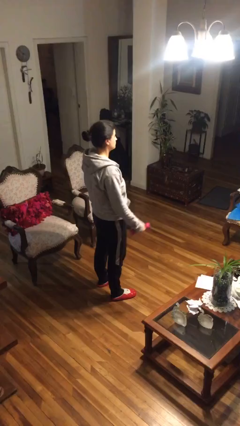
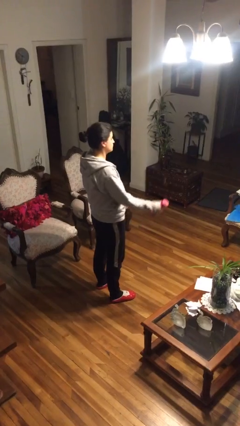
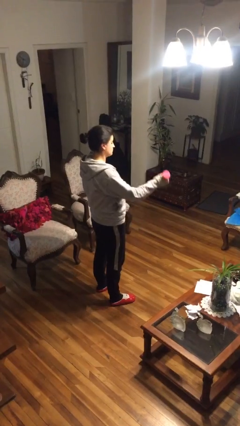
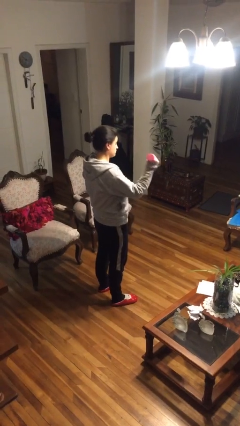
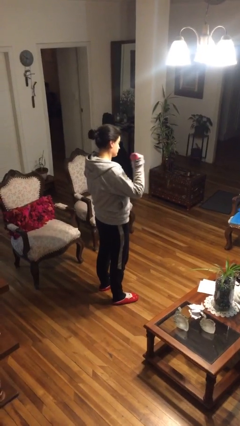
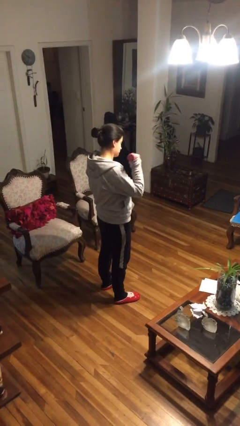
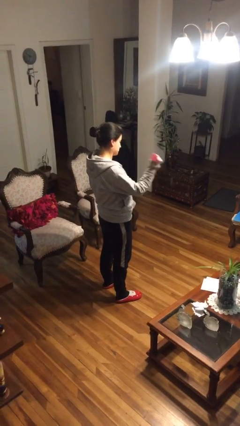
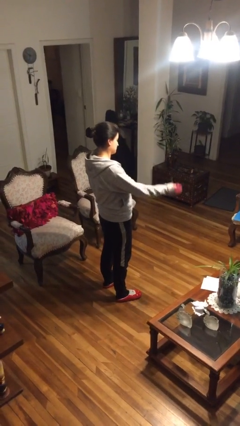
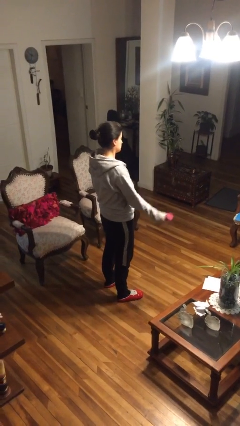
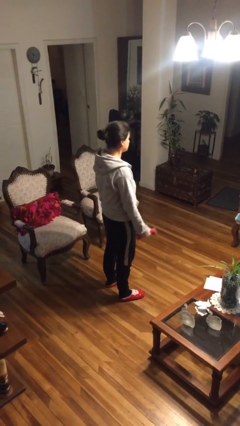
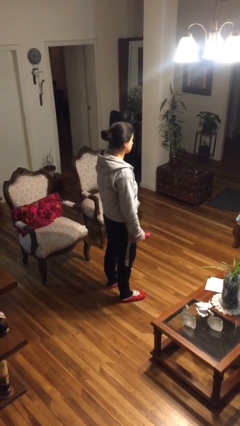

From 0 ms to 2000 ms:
person lifts dumbbells

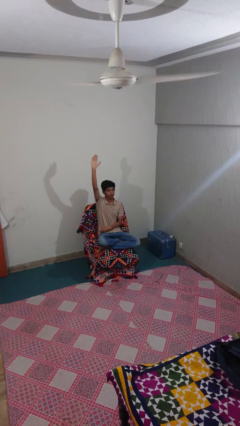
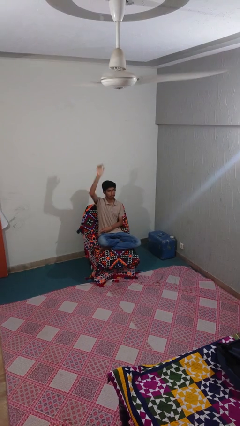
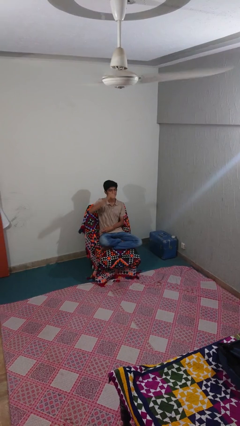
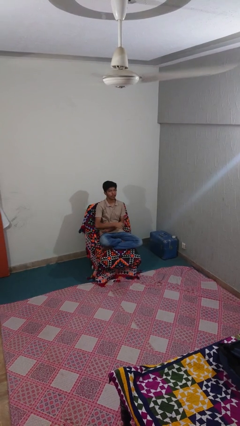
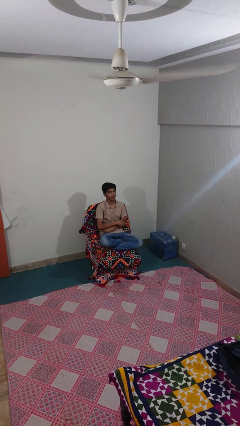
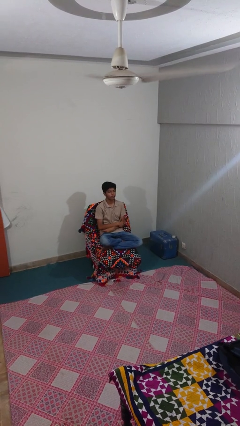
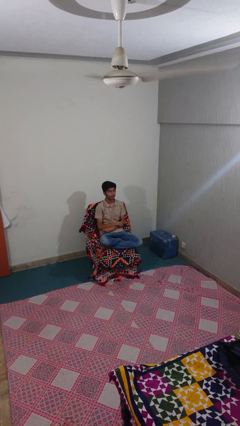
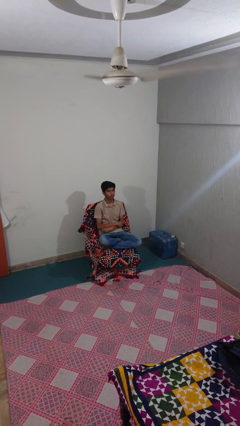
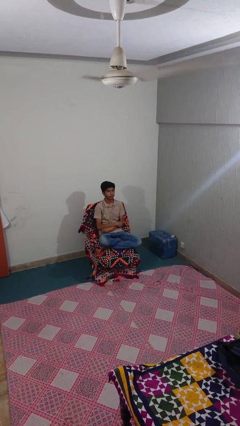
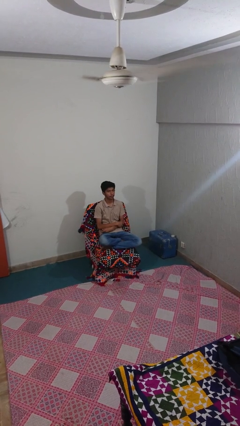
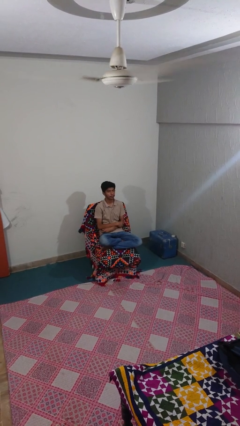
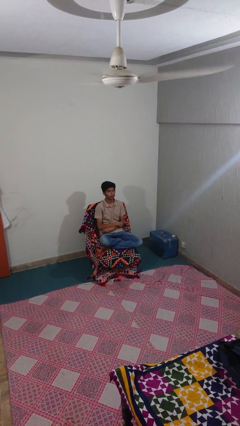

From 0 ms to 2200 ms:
person gestures lower hand

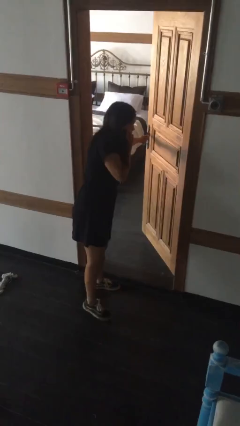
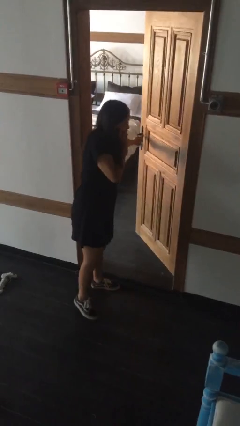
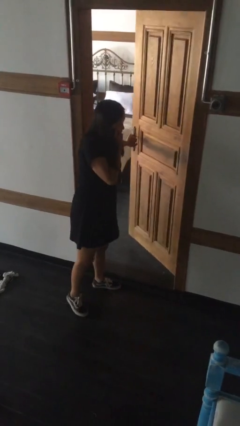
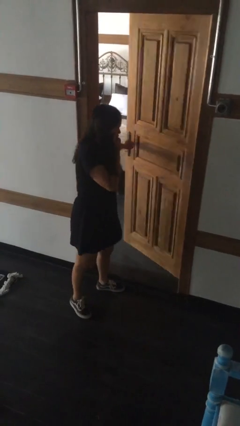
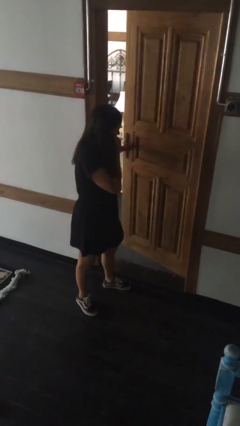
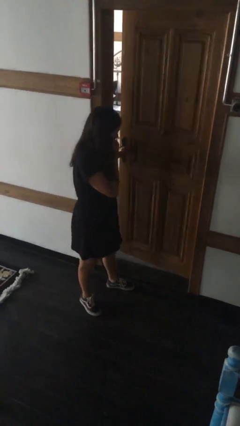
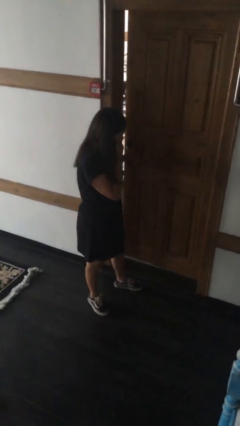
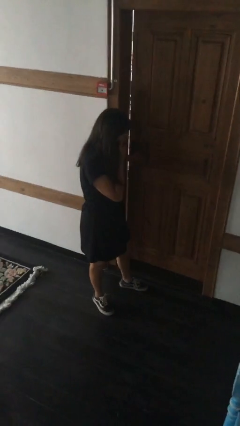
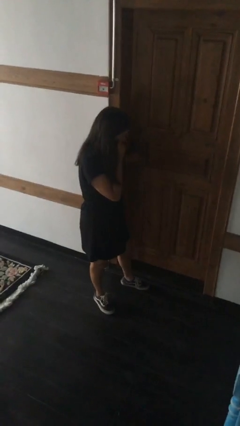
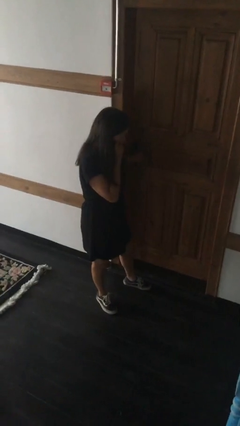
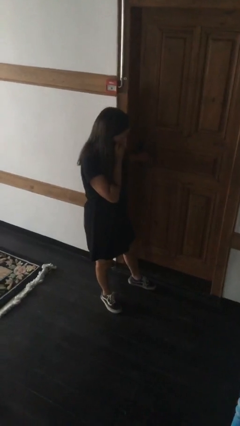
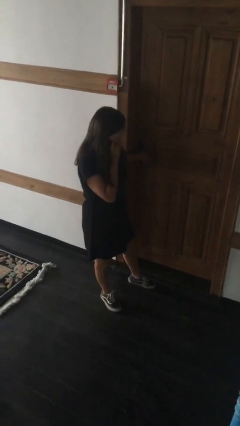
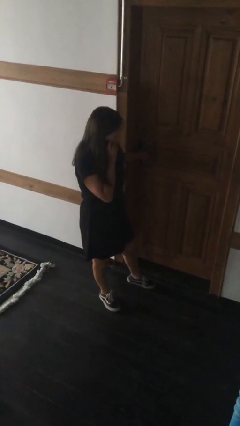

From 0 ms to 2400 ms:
person closes facility door

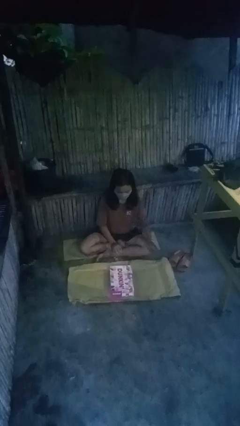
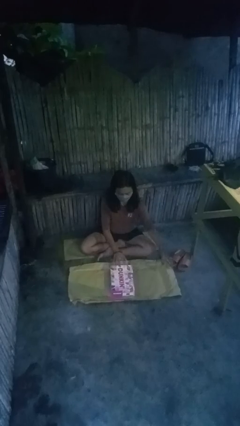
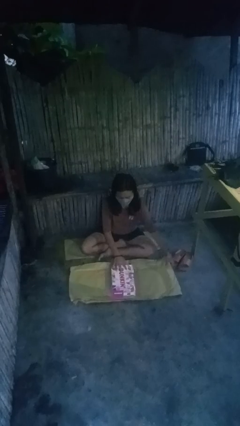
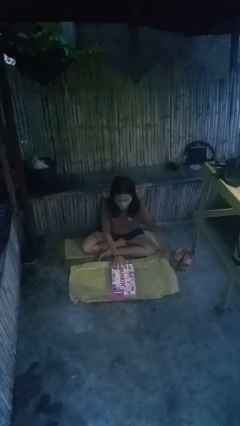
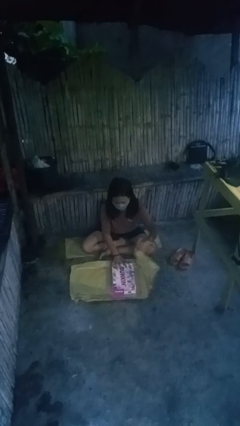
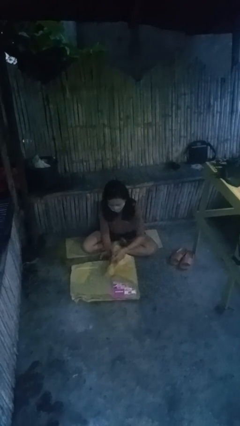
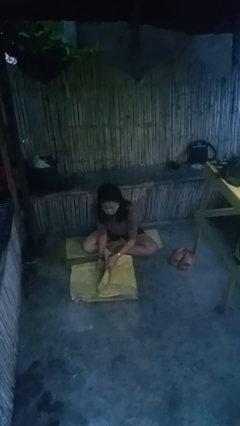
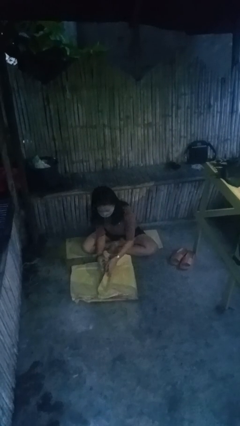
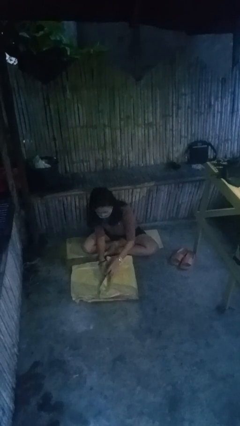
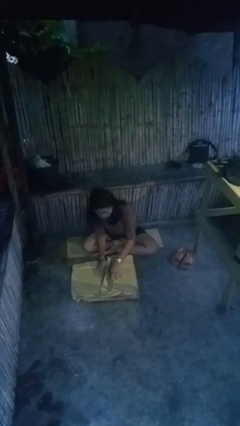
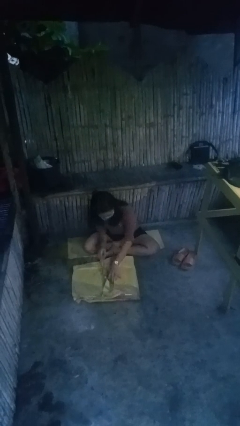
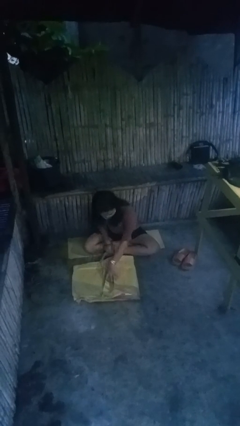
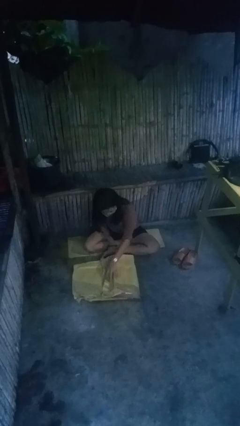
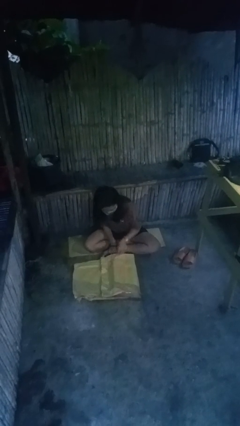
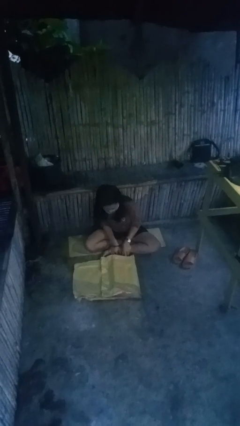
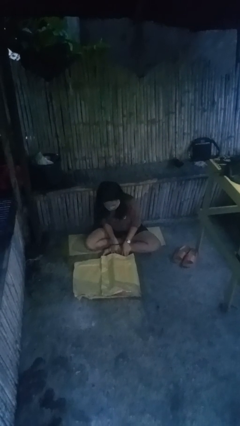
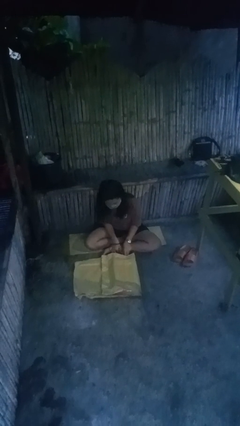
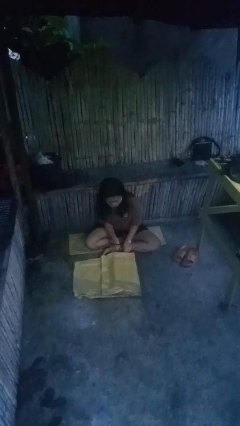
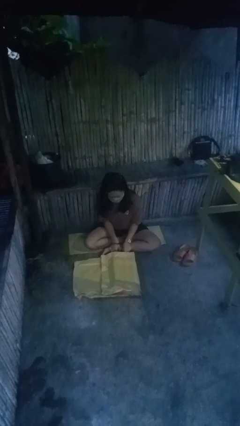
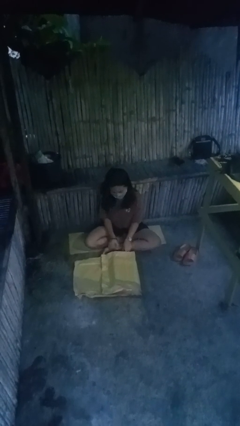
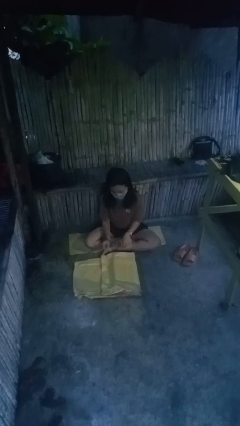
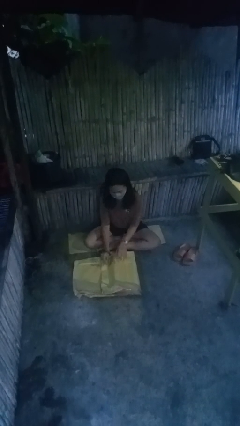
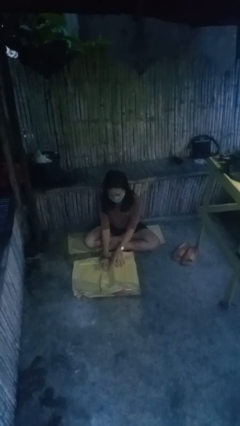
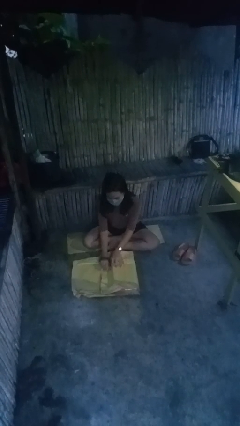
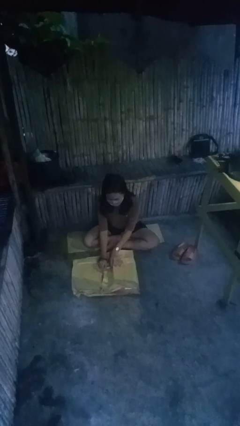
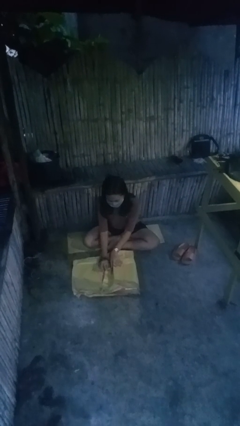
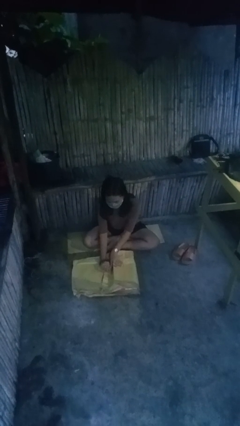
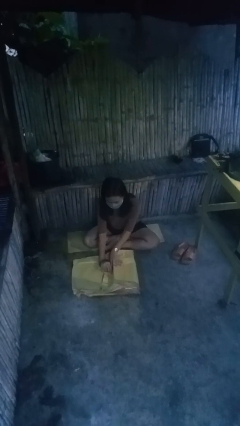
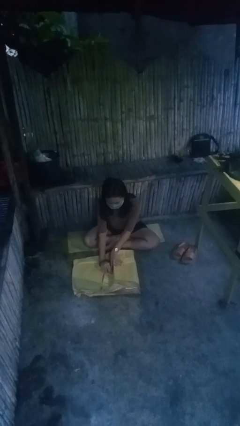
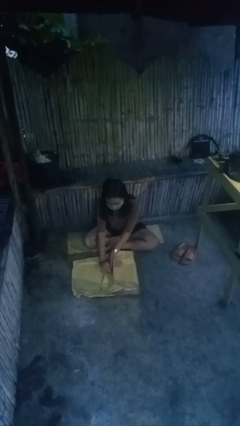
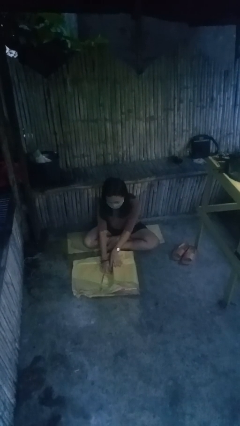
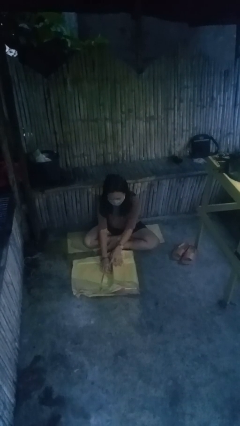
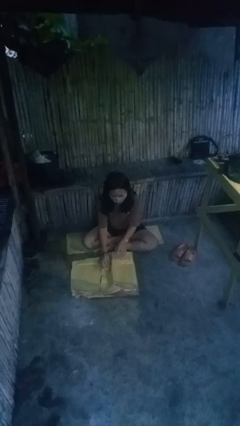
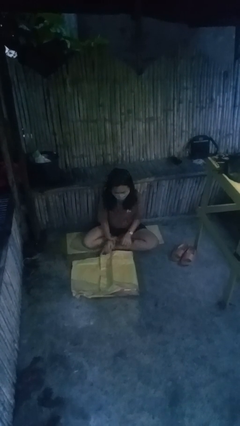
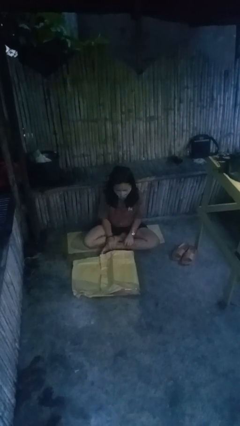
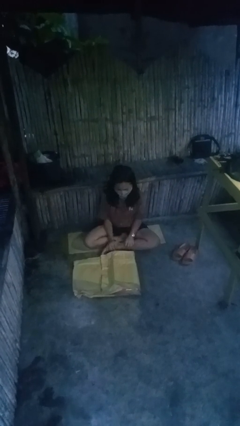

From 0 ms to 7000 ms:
person wraps box

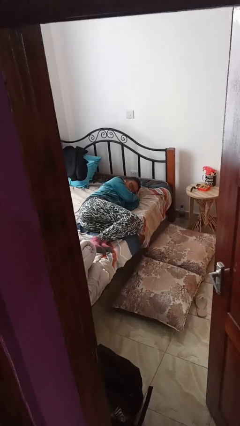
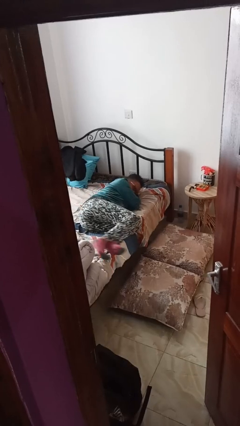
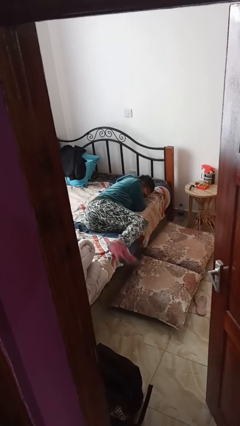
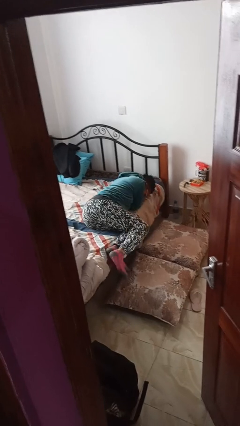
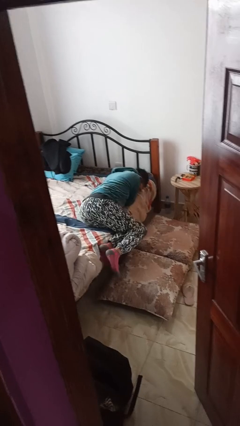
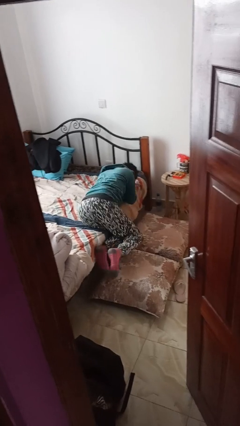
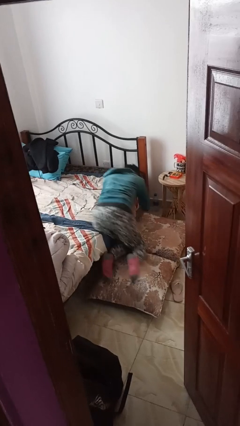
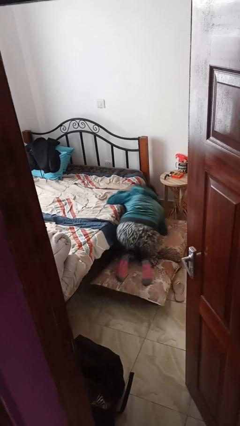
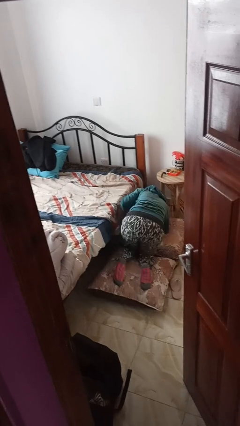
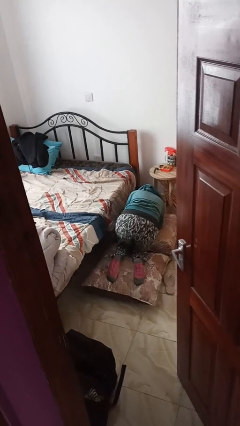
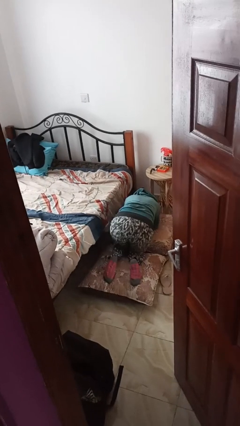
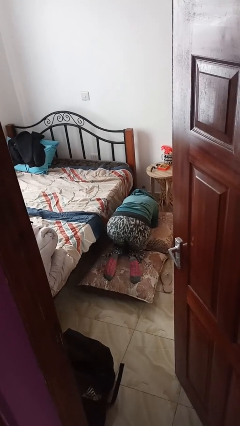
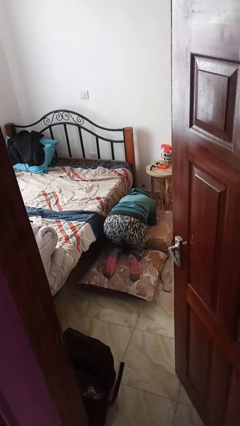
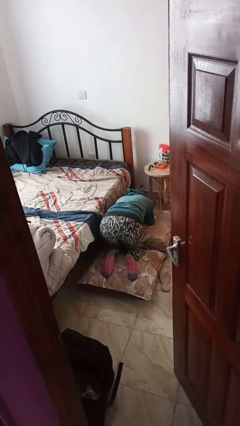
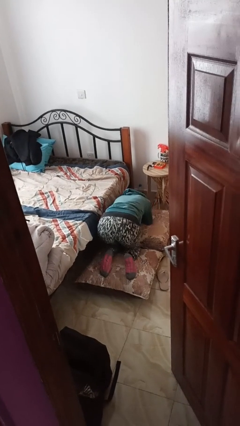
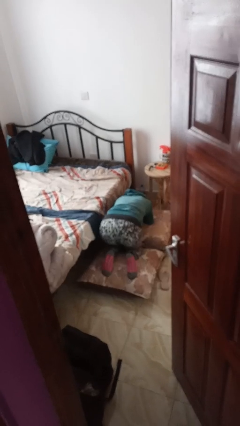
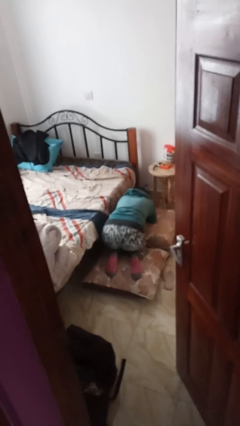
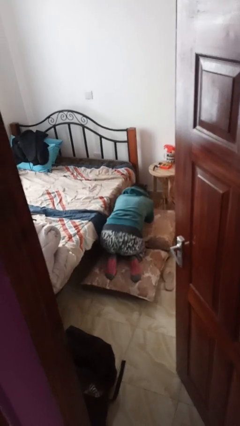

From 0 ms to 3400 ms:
person falls from bed

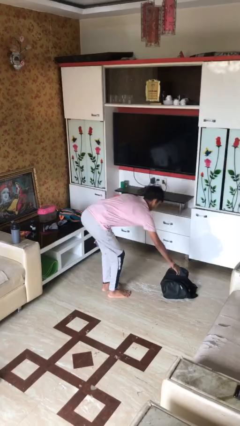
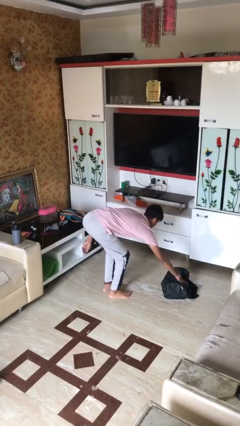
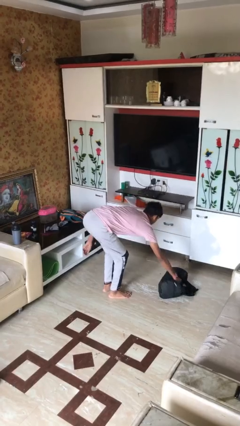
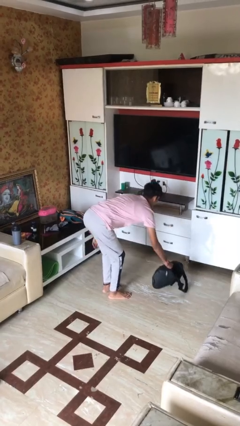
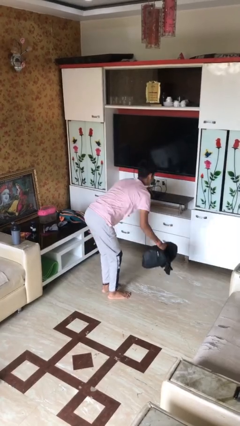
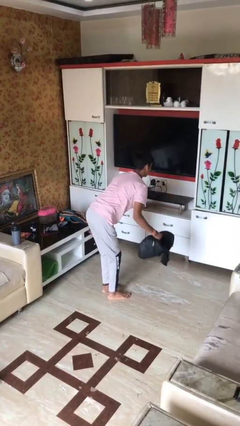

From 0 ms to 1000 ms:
person picks up object from floor
